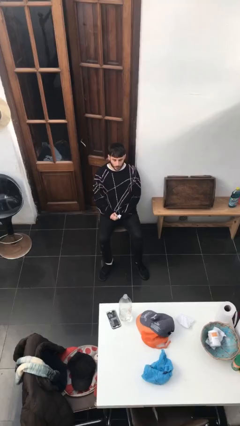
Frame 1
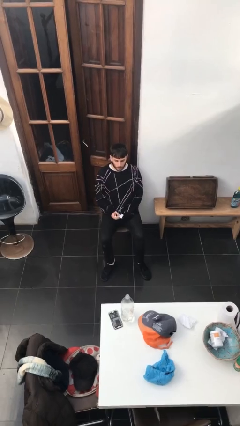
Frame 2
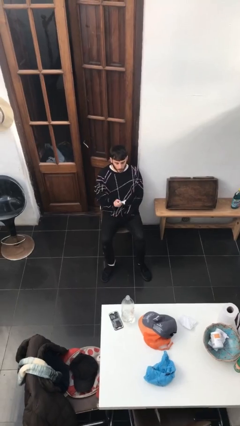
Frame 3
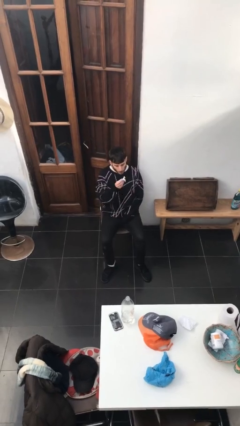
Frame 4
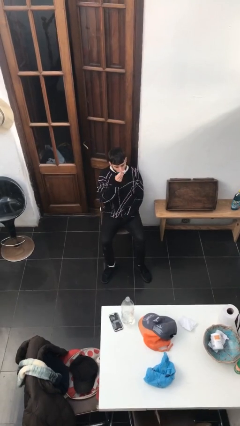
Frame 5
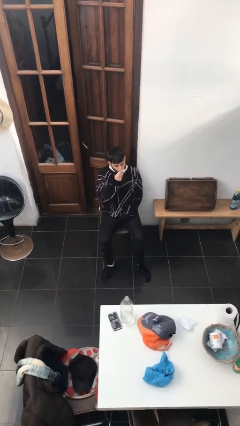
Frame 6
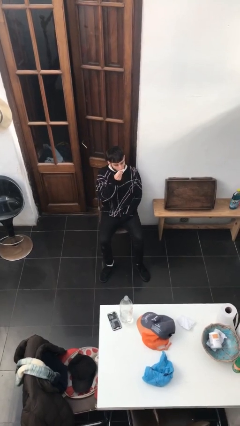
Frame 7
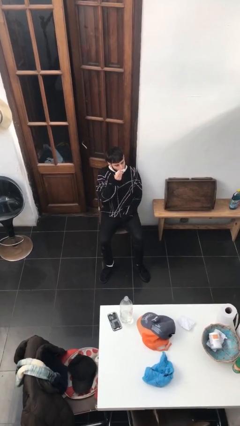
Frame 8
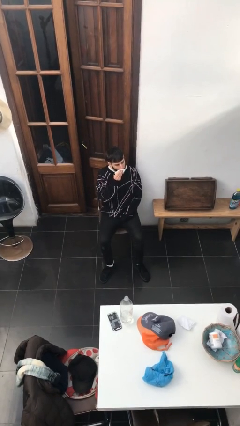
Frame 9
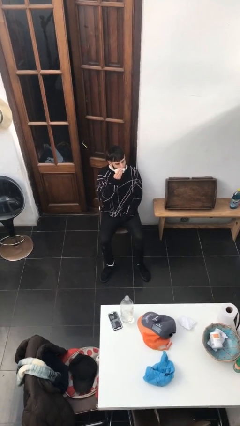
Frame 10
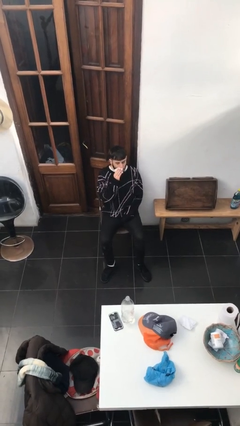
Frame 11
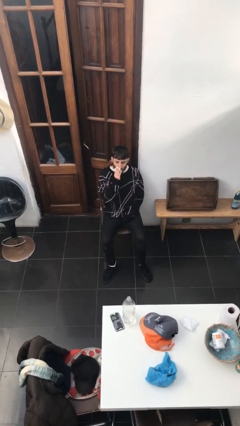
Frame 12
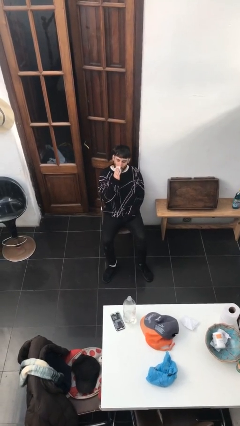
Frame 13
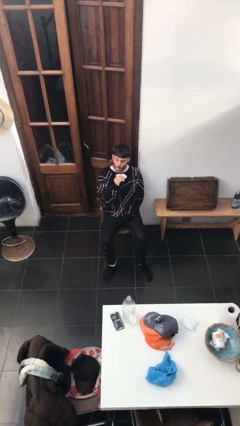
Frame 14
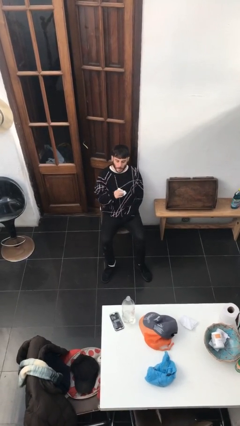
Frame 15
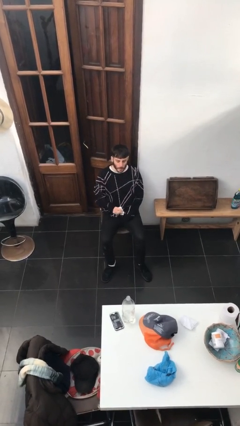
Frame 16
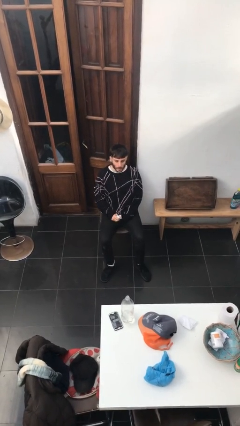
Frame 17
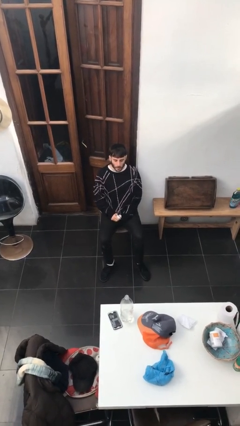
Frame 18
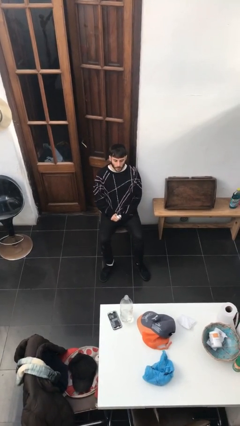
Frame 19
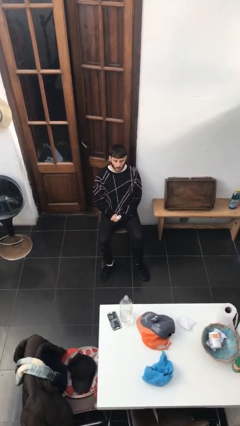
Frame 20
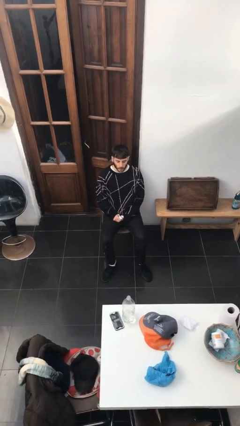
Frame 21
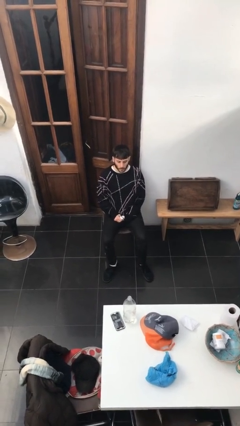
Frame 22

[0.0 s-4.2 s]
person wipes mouth with napkin

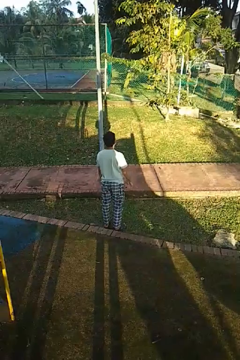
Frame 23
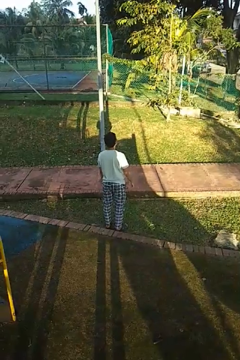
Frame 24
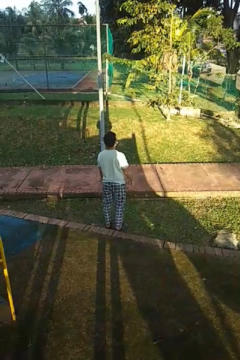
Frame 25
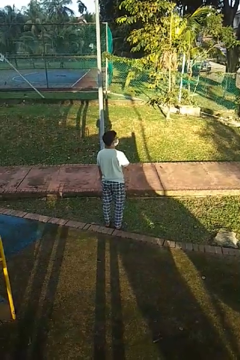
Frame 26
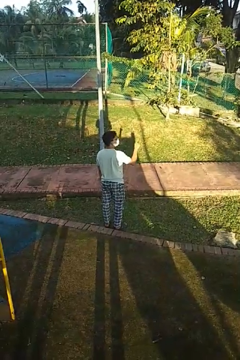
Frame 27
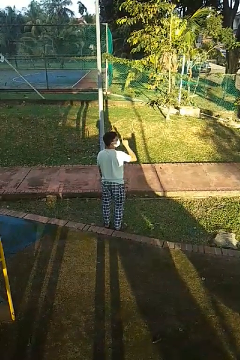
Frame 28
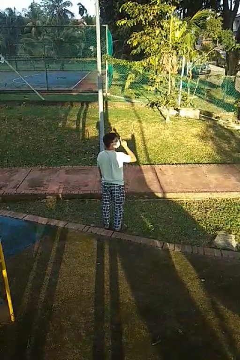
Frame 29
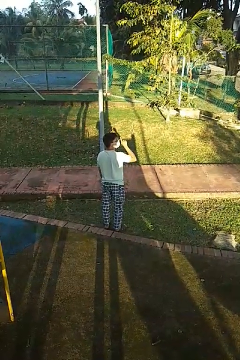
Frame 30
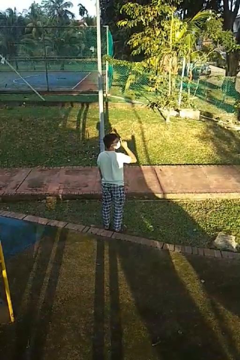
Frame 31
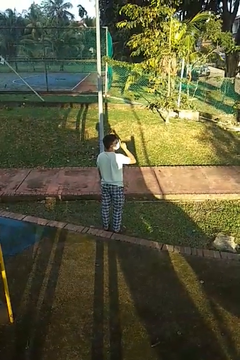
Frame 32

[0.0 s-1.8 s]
person gestures be quiet

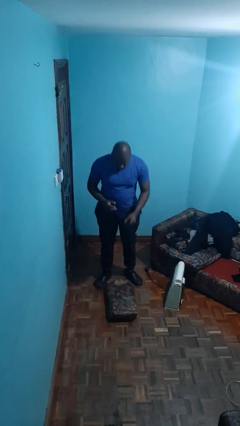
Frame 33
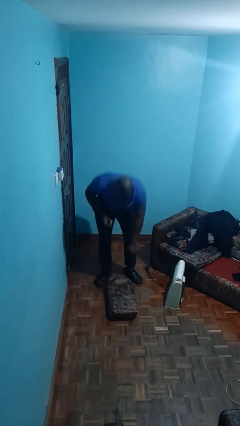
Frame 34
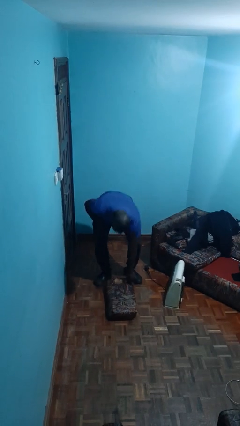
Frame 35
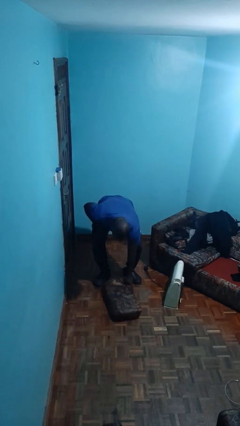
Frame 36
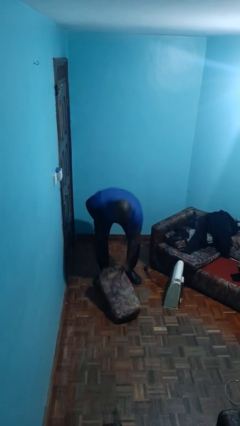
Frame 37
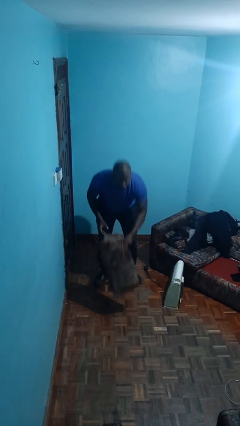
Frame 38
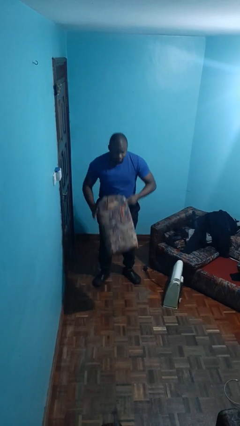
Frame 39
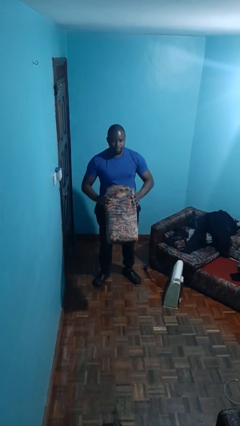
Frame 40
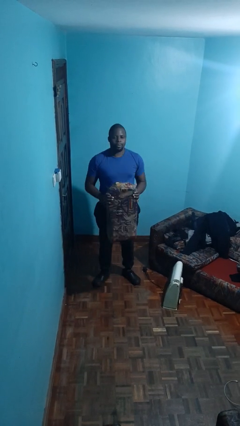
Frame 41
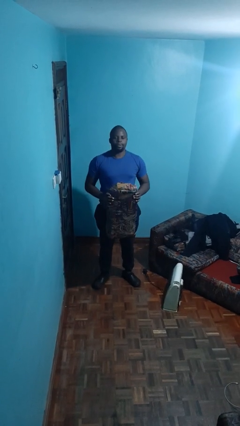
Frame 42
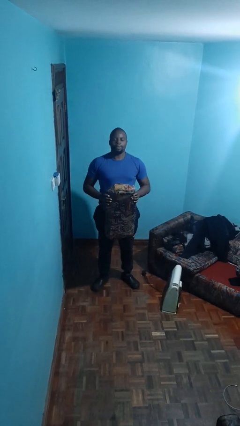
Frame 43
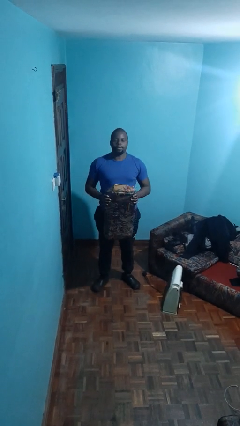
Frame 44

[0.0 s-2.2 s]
person picks up object from floor

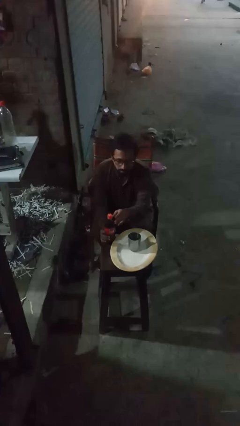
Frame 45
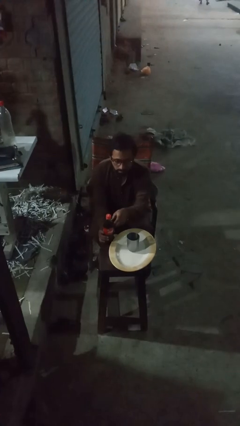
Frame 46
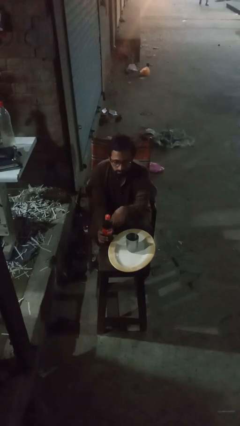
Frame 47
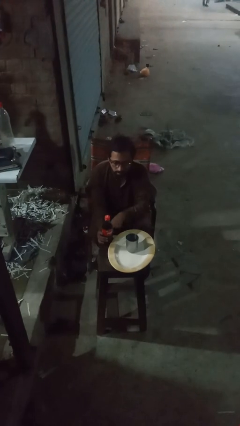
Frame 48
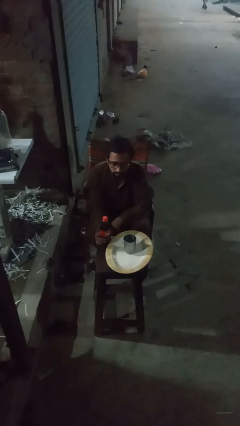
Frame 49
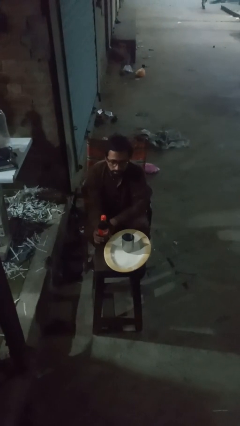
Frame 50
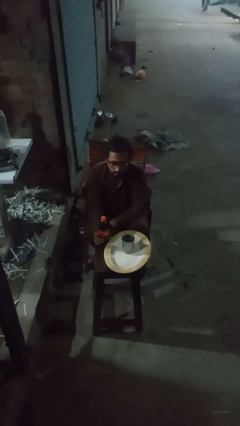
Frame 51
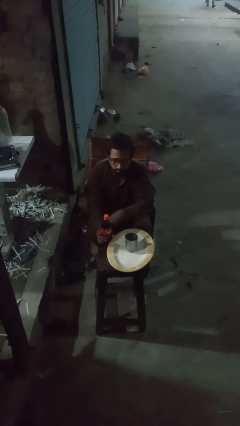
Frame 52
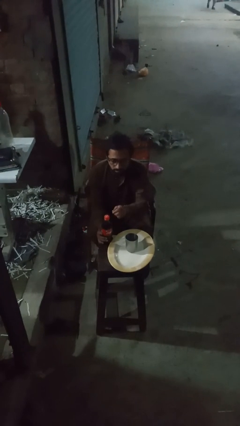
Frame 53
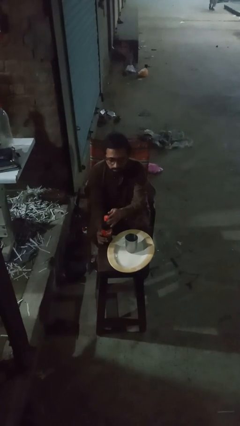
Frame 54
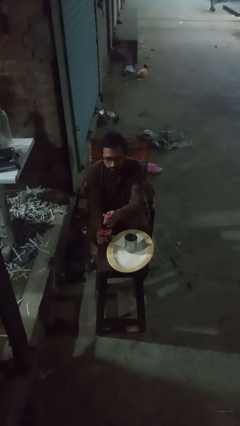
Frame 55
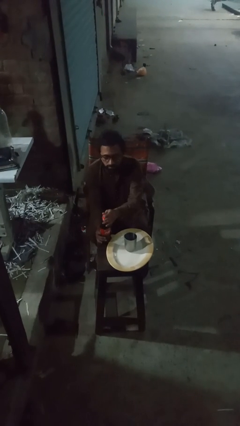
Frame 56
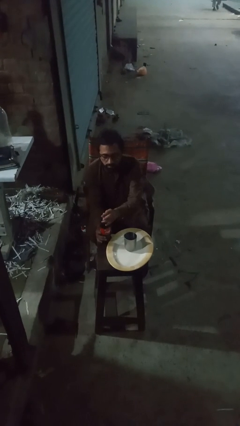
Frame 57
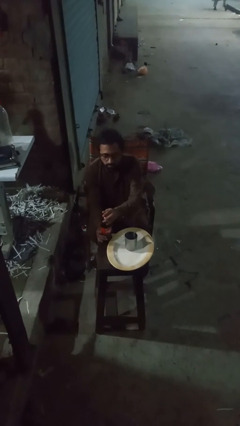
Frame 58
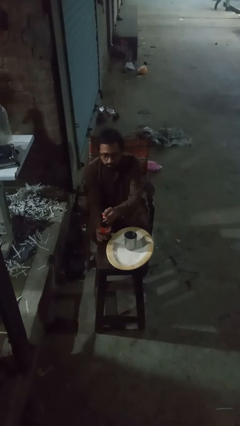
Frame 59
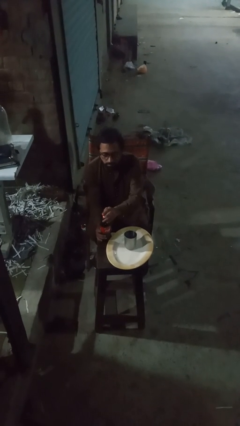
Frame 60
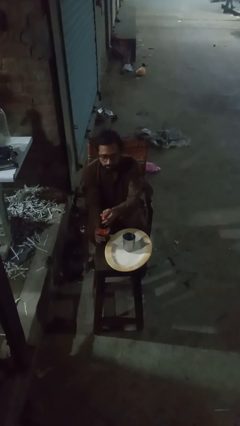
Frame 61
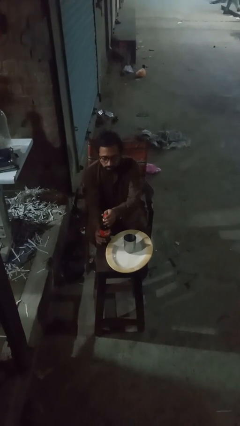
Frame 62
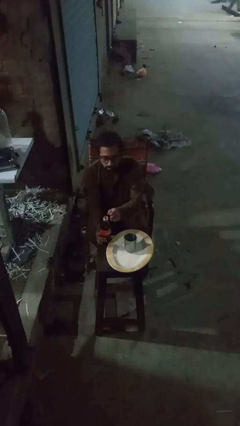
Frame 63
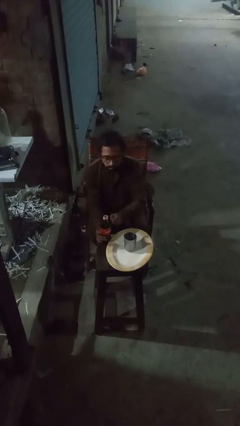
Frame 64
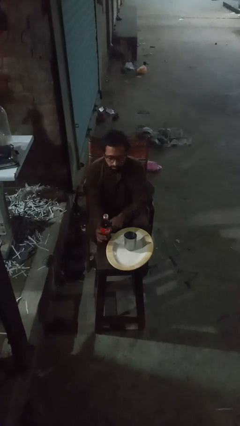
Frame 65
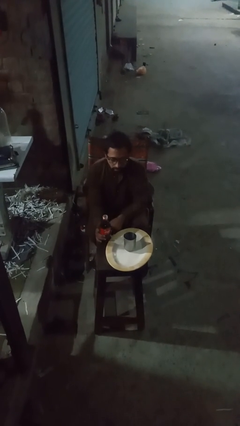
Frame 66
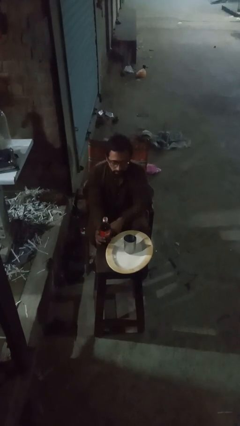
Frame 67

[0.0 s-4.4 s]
person unscrews lid from bottle

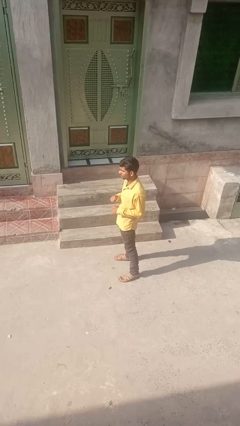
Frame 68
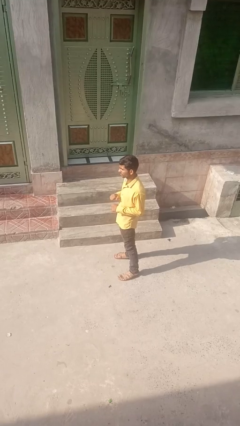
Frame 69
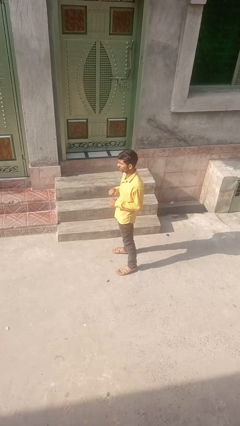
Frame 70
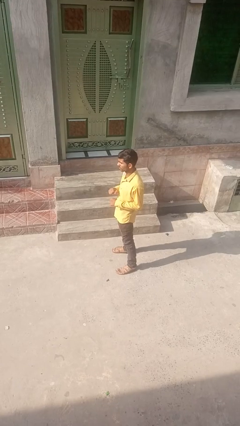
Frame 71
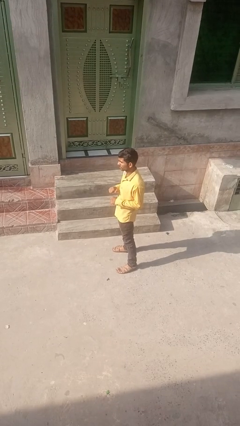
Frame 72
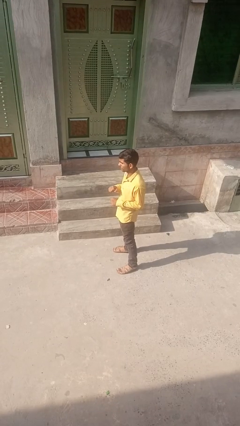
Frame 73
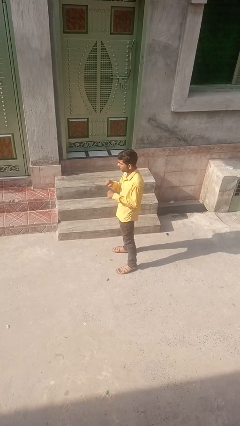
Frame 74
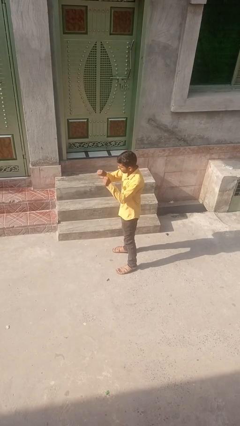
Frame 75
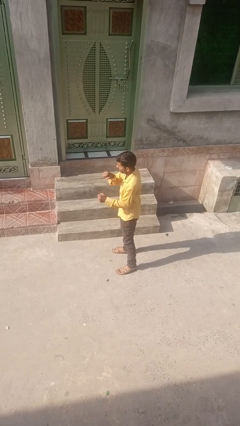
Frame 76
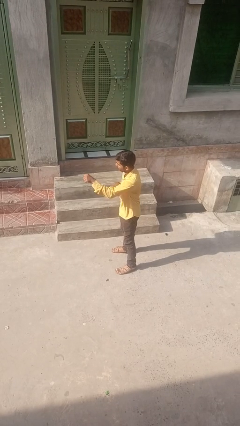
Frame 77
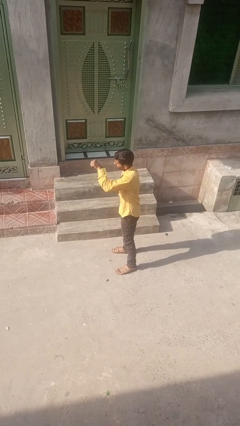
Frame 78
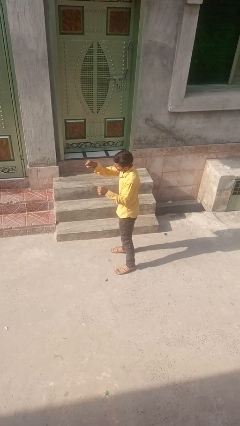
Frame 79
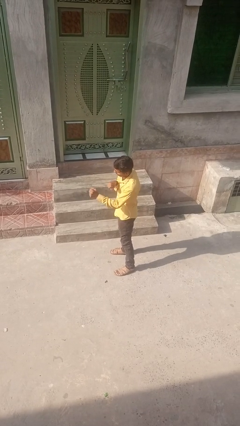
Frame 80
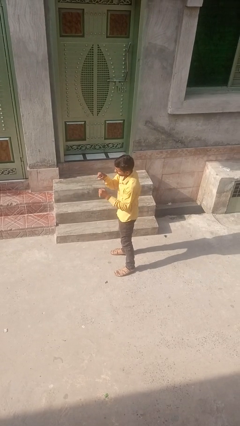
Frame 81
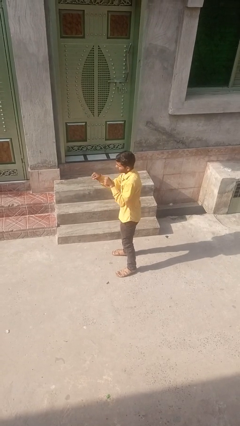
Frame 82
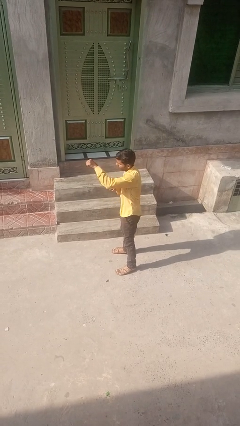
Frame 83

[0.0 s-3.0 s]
person punches

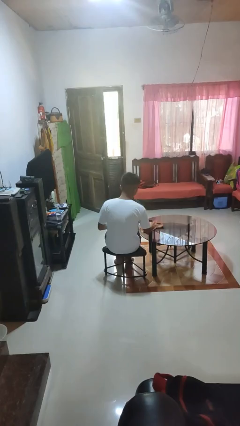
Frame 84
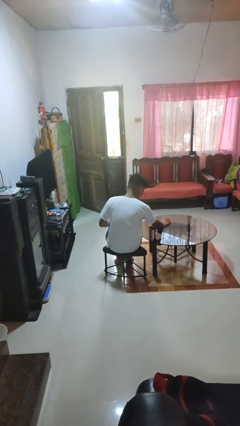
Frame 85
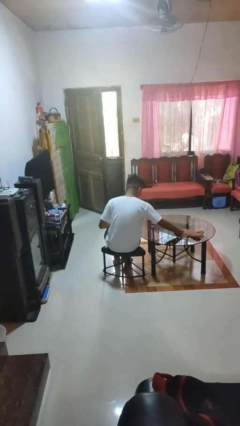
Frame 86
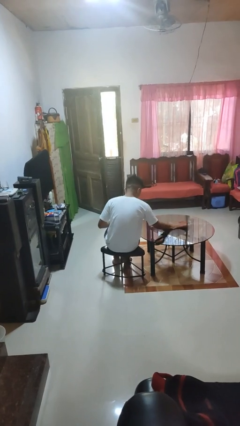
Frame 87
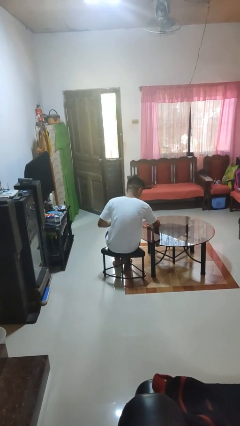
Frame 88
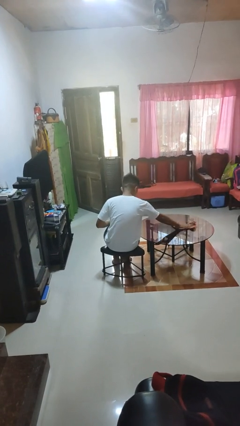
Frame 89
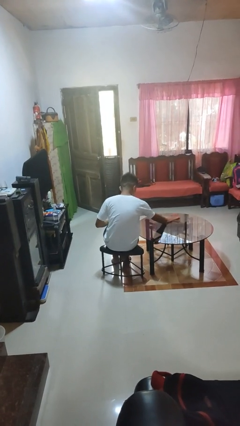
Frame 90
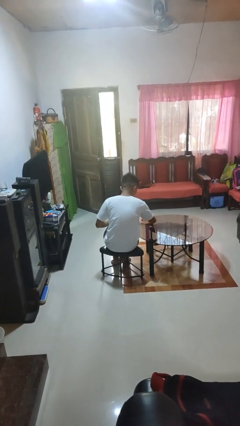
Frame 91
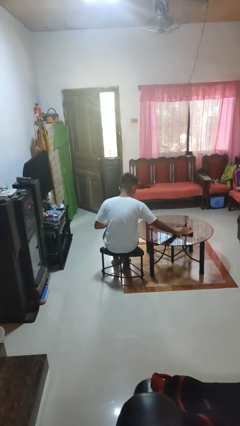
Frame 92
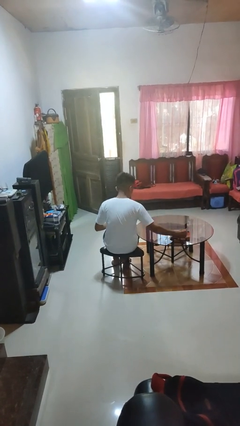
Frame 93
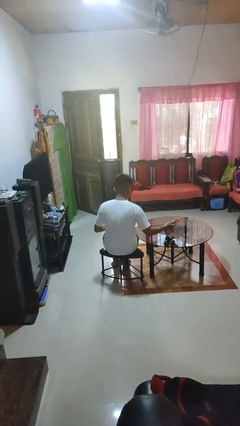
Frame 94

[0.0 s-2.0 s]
person cleans table with rag

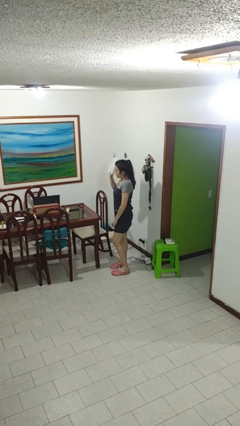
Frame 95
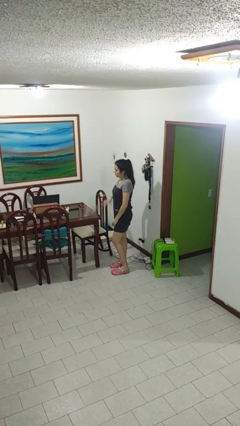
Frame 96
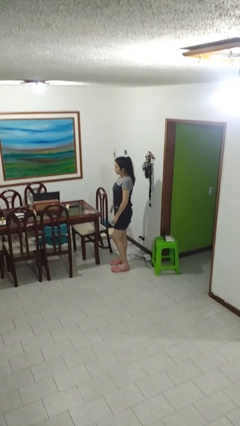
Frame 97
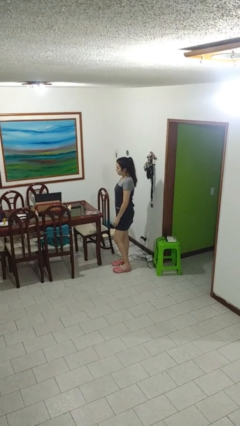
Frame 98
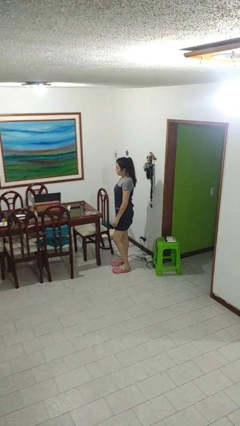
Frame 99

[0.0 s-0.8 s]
person throws object on table
